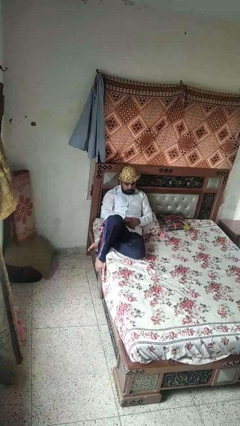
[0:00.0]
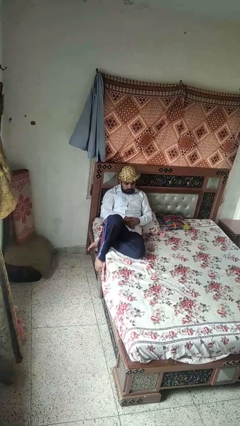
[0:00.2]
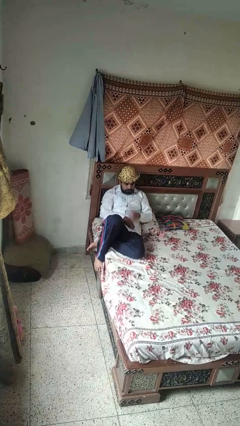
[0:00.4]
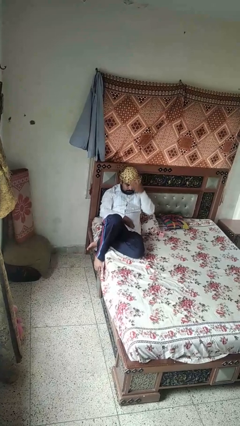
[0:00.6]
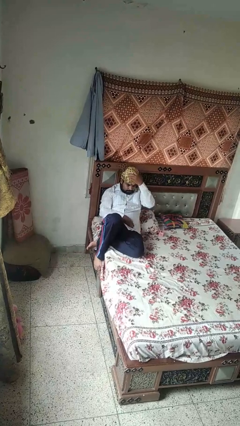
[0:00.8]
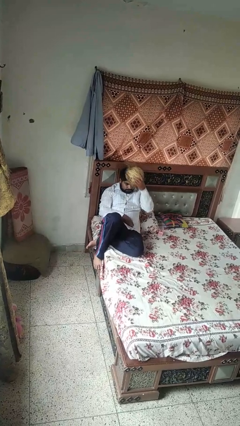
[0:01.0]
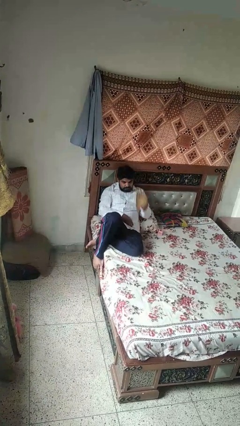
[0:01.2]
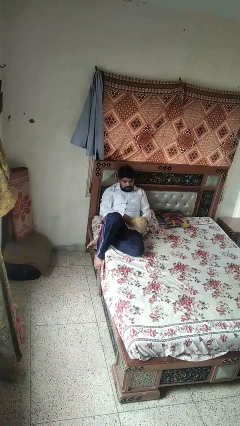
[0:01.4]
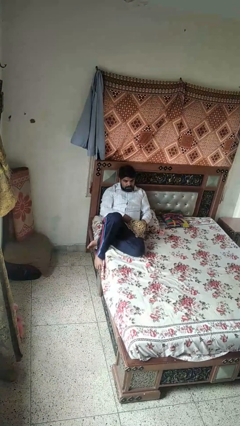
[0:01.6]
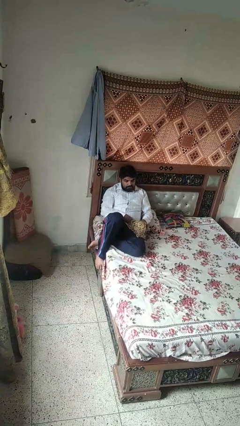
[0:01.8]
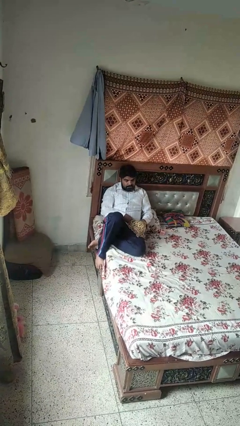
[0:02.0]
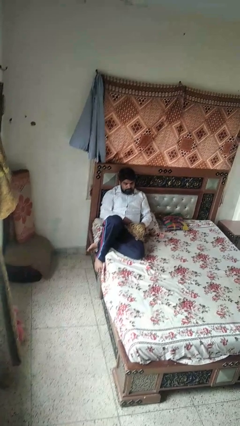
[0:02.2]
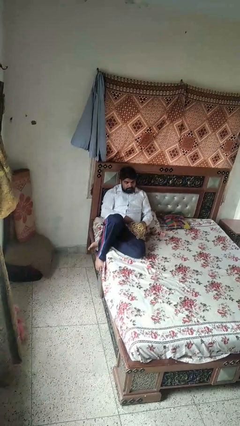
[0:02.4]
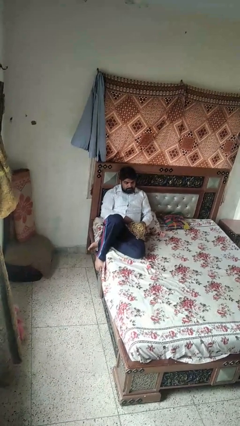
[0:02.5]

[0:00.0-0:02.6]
person takes off hat

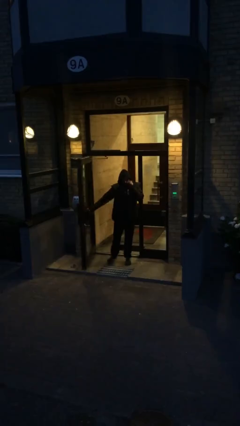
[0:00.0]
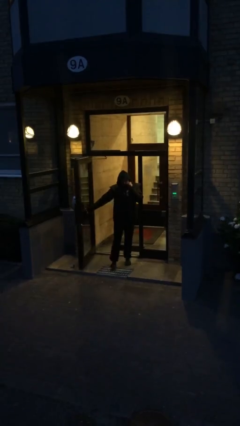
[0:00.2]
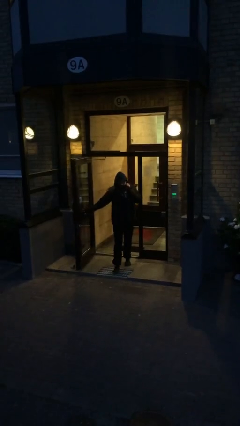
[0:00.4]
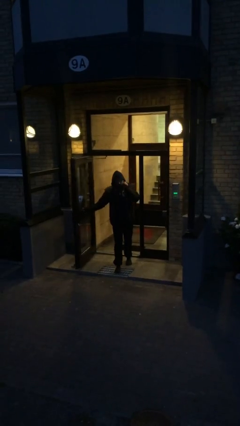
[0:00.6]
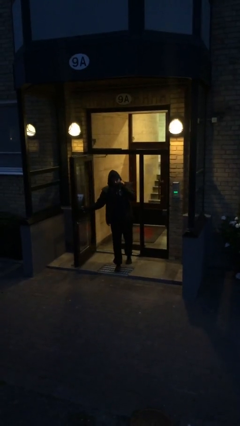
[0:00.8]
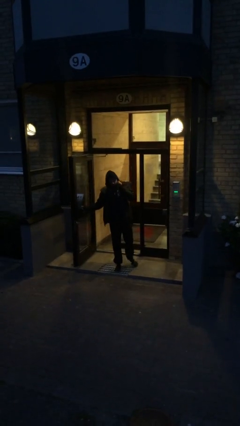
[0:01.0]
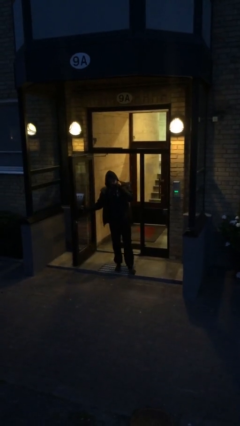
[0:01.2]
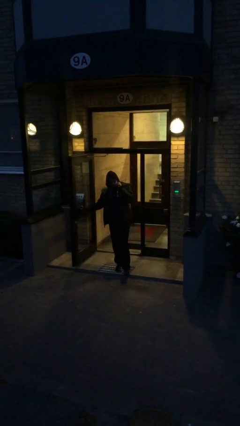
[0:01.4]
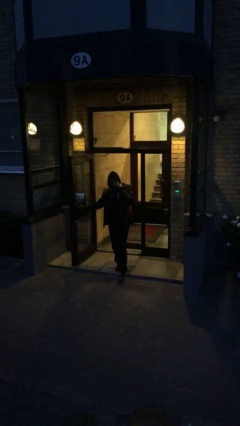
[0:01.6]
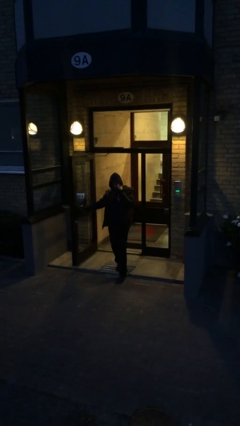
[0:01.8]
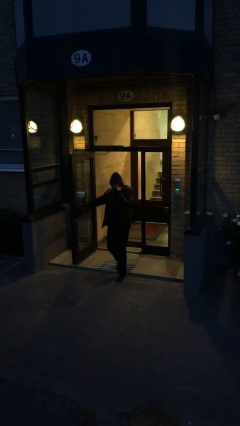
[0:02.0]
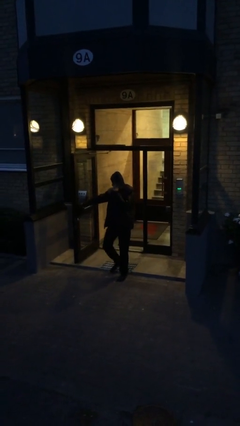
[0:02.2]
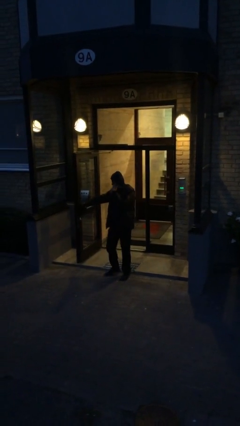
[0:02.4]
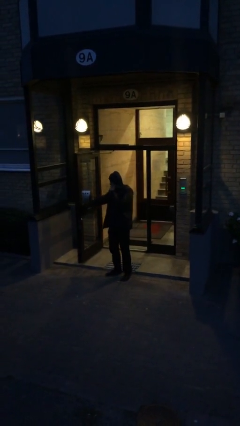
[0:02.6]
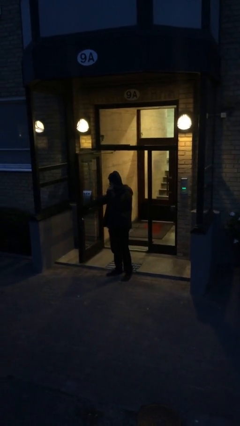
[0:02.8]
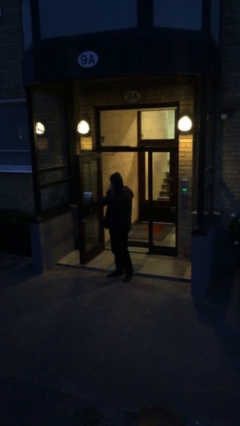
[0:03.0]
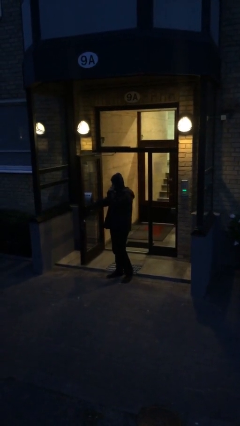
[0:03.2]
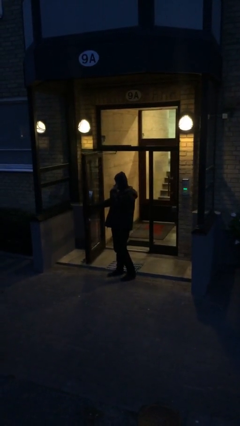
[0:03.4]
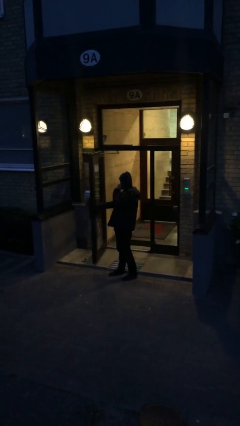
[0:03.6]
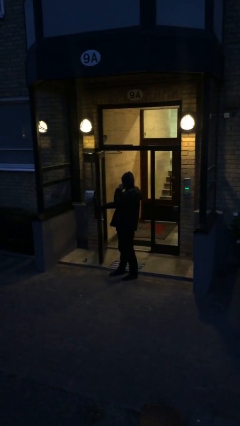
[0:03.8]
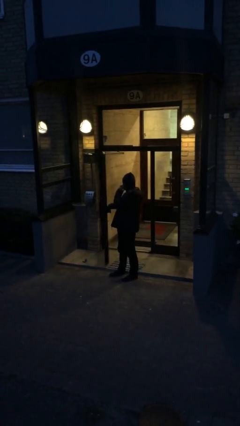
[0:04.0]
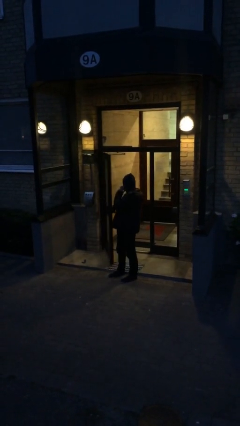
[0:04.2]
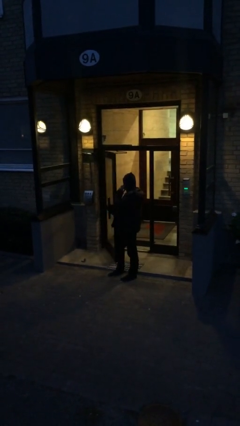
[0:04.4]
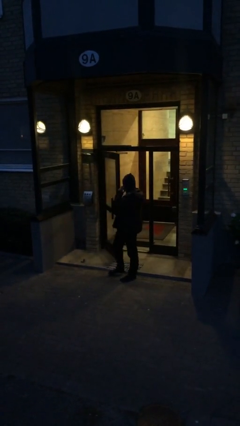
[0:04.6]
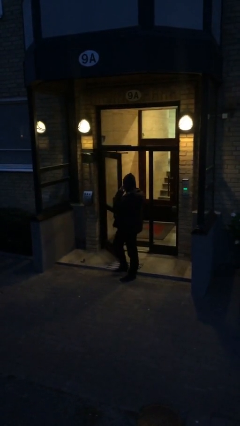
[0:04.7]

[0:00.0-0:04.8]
person enters scene through structure

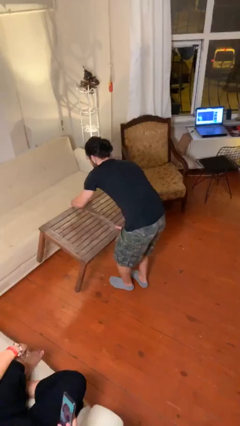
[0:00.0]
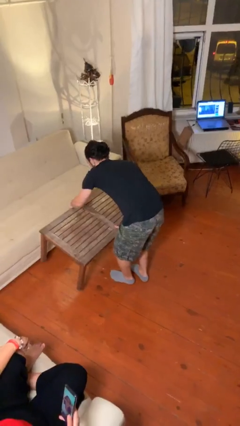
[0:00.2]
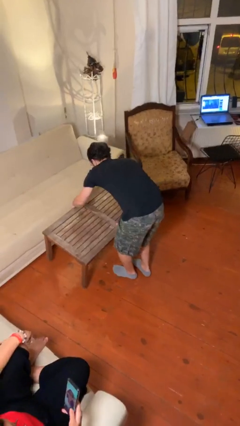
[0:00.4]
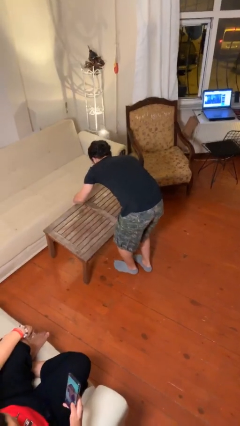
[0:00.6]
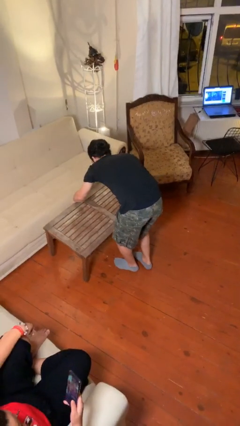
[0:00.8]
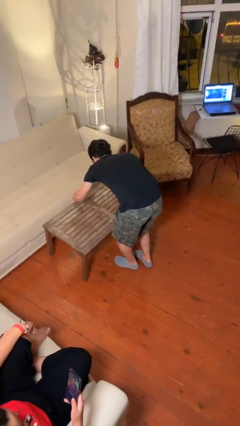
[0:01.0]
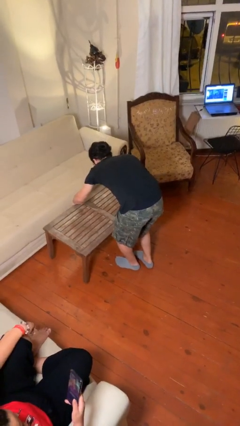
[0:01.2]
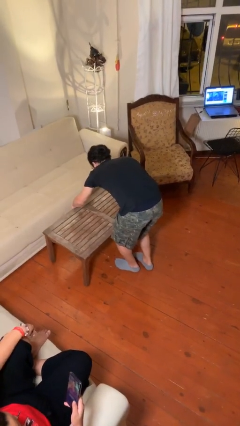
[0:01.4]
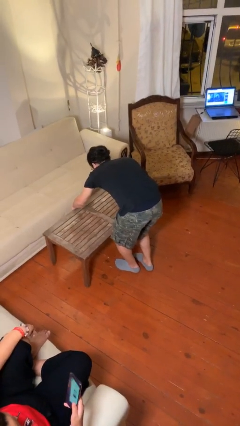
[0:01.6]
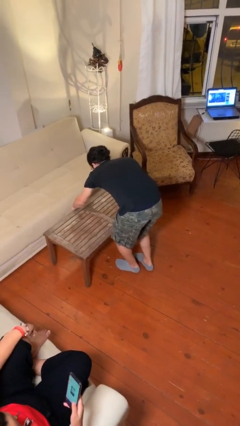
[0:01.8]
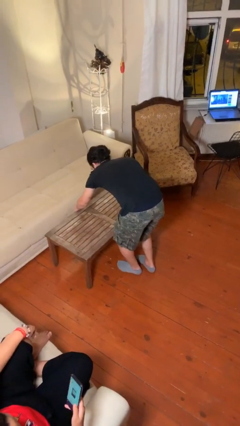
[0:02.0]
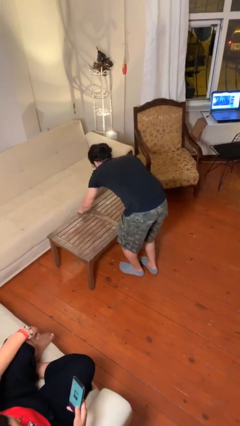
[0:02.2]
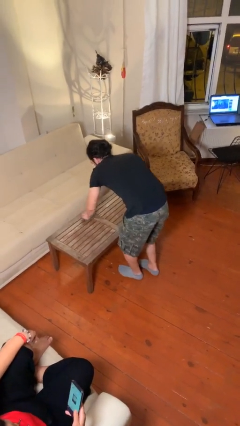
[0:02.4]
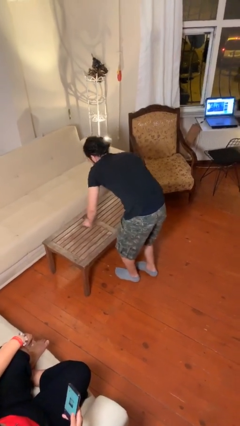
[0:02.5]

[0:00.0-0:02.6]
person puts down object on floor

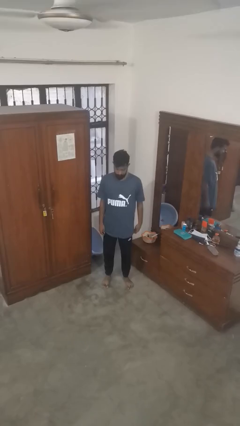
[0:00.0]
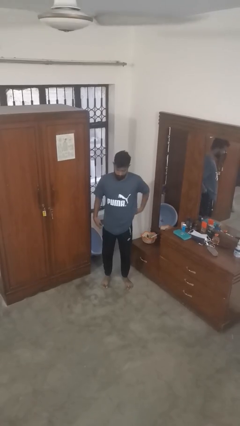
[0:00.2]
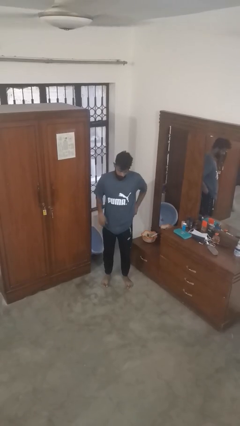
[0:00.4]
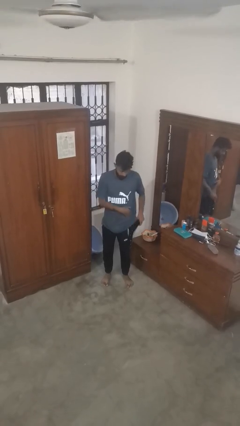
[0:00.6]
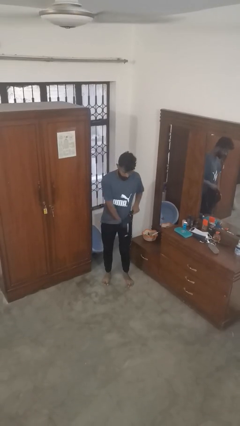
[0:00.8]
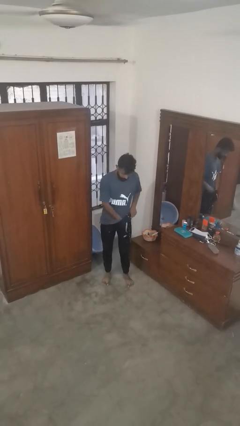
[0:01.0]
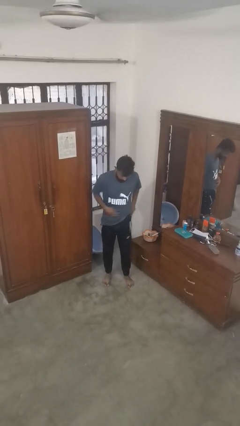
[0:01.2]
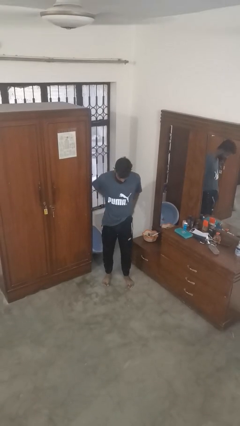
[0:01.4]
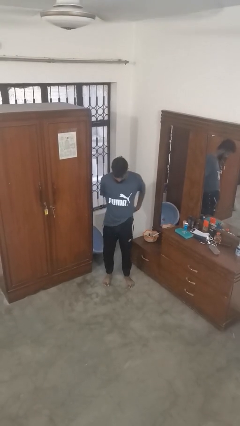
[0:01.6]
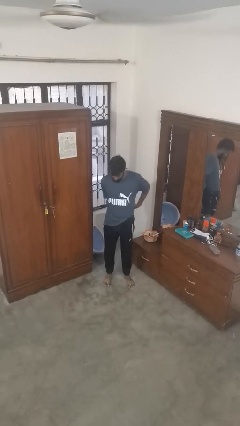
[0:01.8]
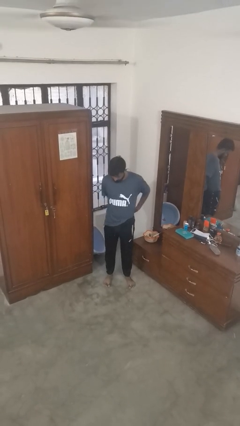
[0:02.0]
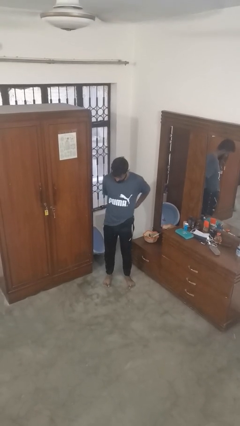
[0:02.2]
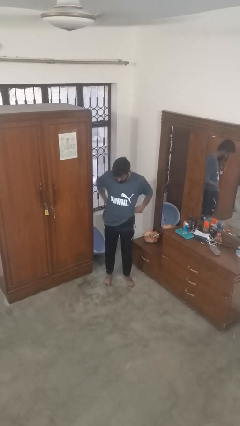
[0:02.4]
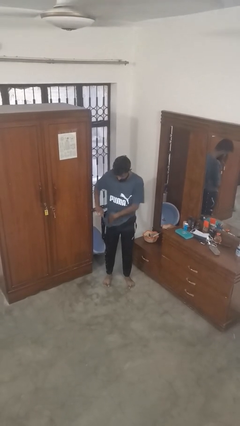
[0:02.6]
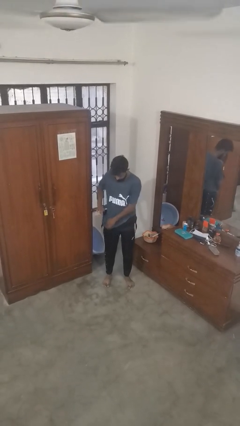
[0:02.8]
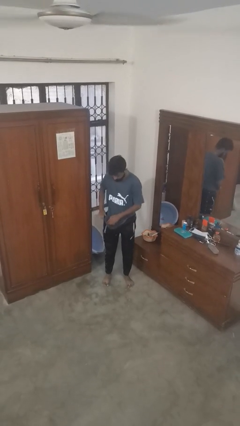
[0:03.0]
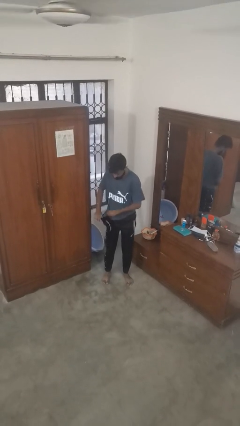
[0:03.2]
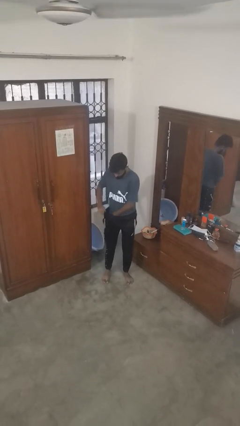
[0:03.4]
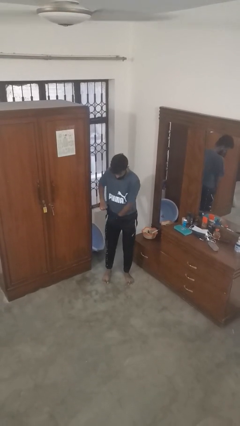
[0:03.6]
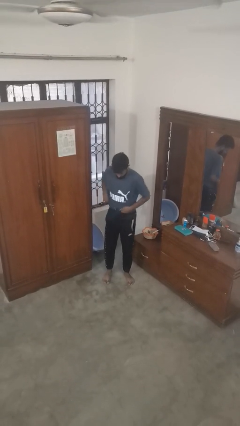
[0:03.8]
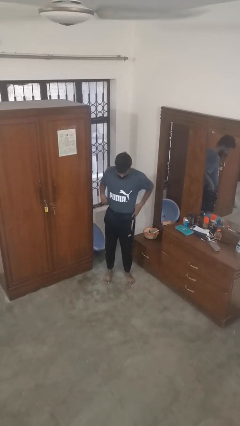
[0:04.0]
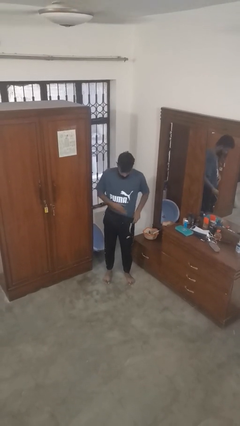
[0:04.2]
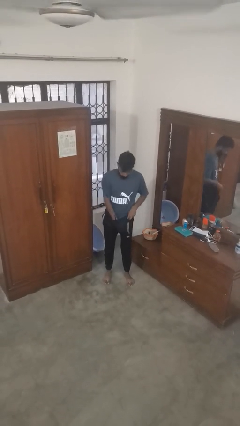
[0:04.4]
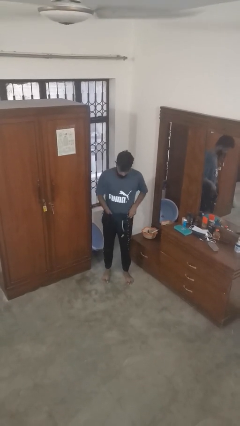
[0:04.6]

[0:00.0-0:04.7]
person tucks in shirt

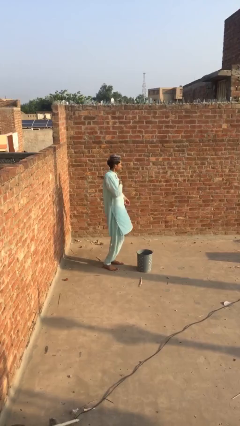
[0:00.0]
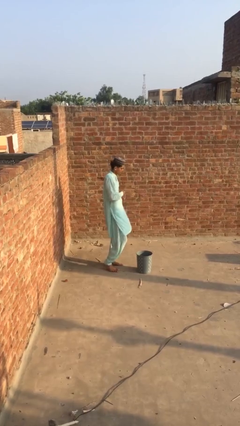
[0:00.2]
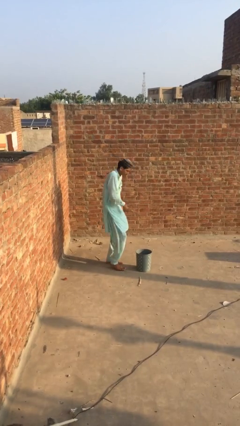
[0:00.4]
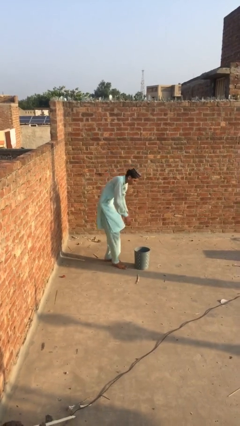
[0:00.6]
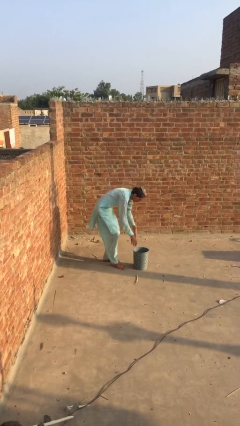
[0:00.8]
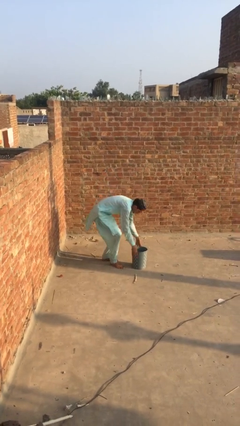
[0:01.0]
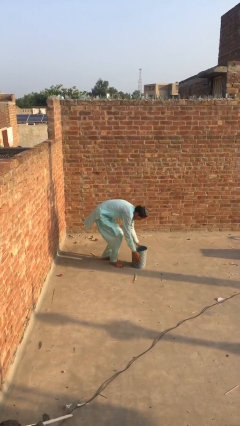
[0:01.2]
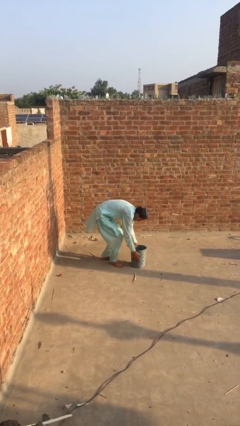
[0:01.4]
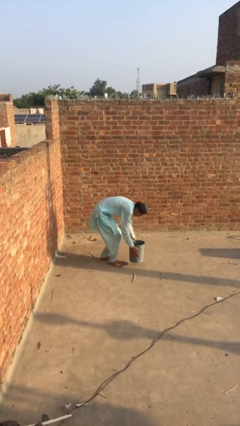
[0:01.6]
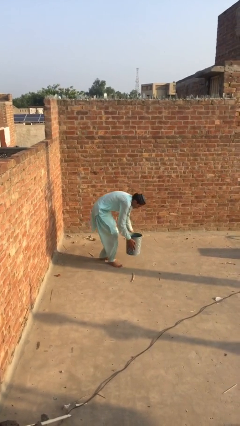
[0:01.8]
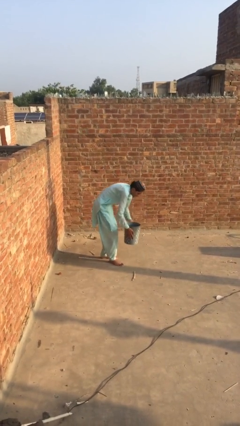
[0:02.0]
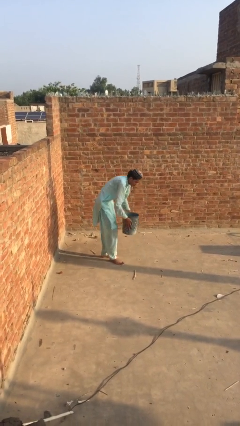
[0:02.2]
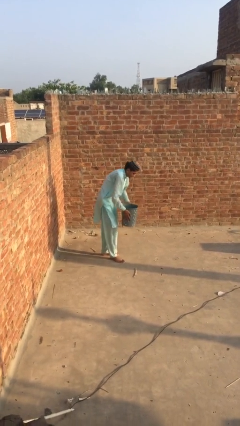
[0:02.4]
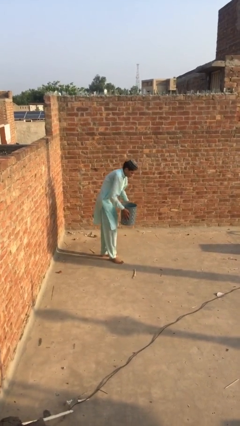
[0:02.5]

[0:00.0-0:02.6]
person picks up object from floor

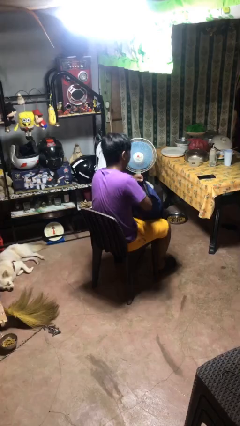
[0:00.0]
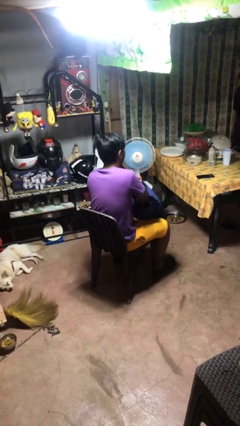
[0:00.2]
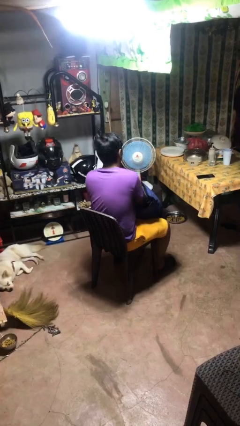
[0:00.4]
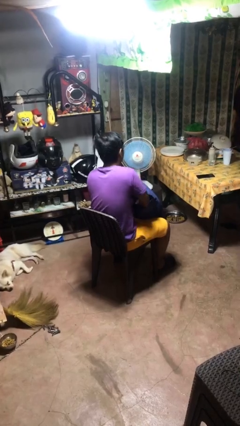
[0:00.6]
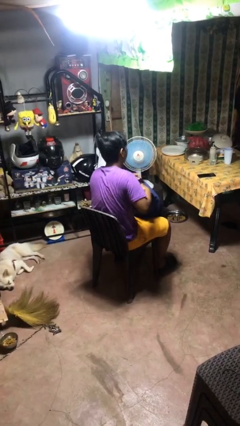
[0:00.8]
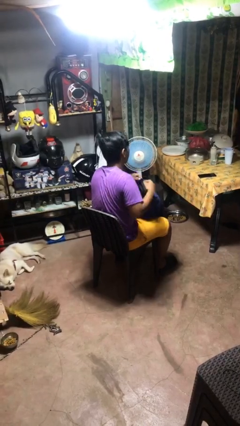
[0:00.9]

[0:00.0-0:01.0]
person puts object into backpack
